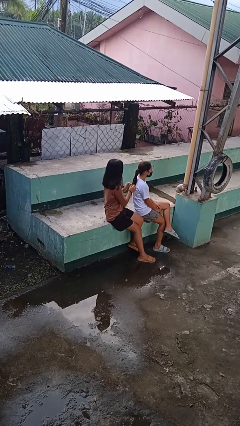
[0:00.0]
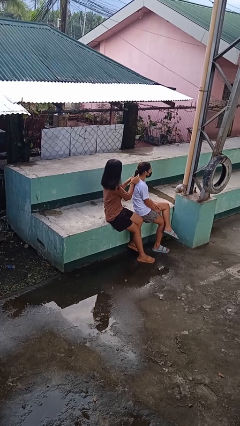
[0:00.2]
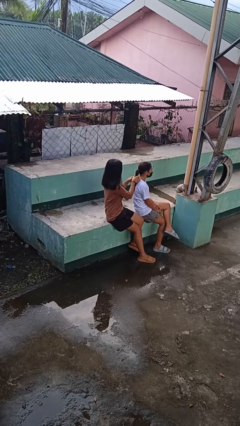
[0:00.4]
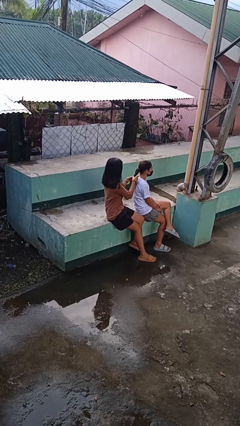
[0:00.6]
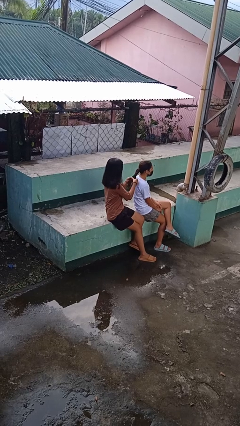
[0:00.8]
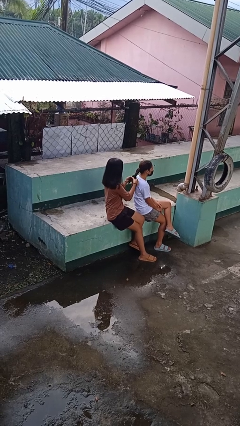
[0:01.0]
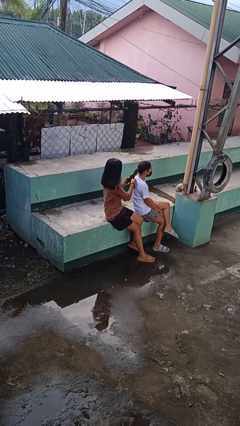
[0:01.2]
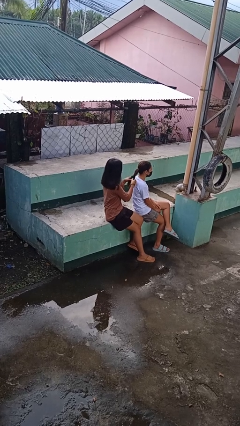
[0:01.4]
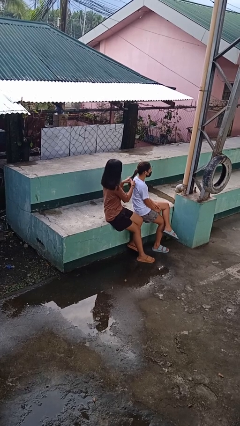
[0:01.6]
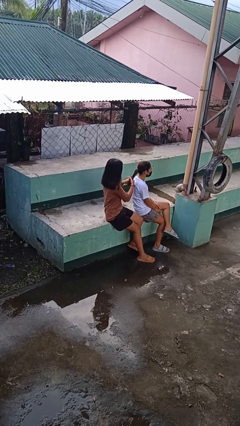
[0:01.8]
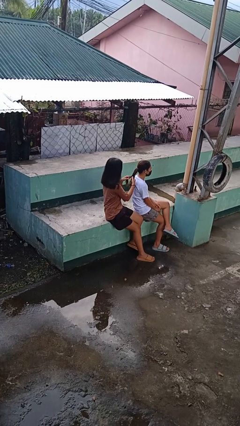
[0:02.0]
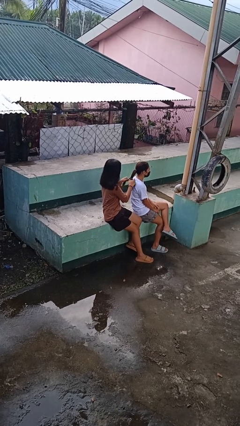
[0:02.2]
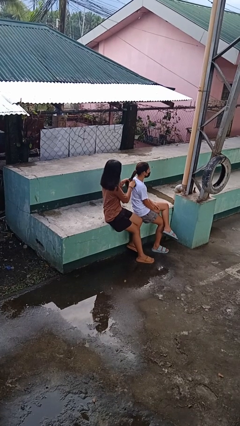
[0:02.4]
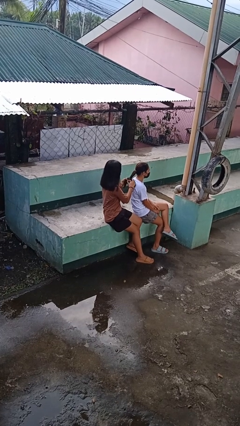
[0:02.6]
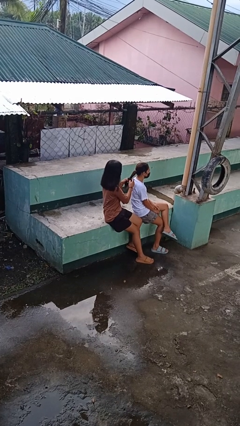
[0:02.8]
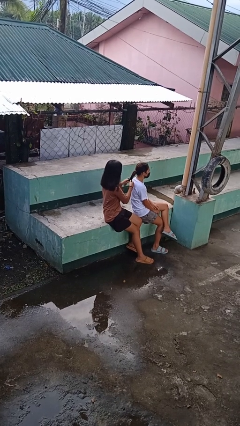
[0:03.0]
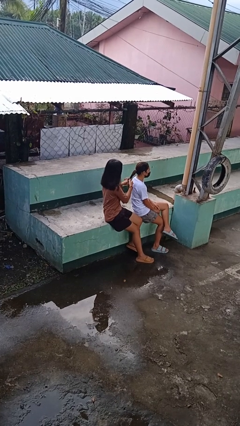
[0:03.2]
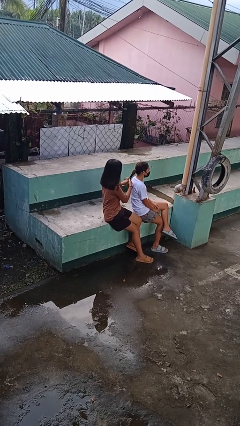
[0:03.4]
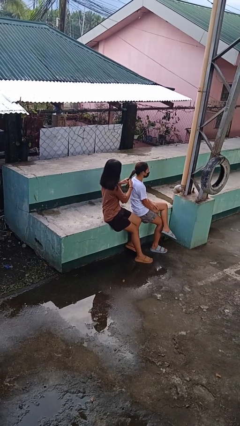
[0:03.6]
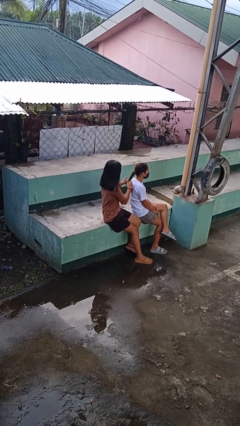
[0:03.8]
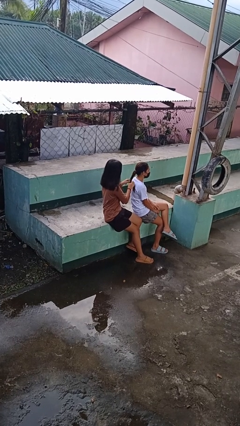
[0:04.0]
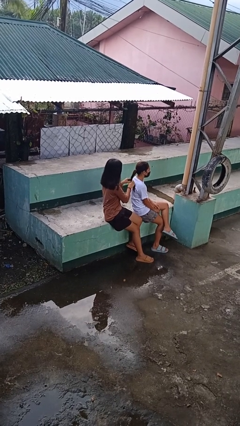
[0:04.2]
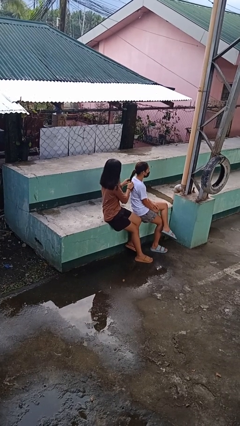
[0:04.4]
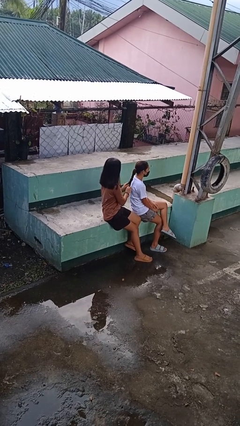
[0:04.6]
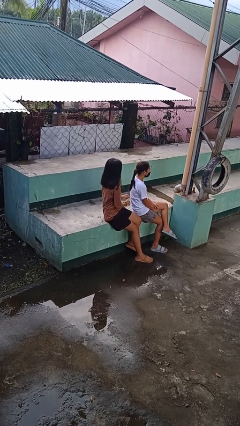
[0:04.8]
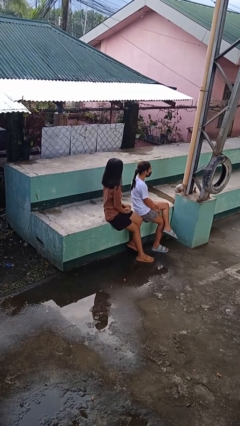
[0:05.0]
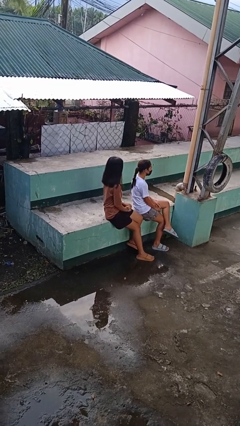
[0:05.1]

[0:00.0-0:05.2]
person braids hair of person

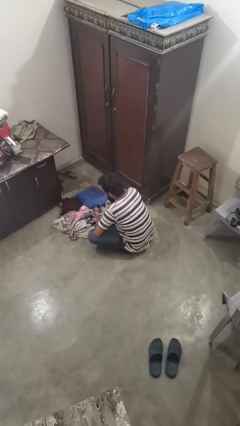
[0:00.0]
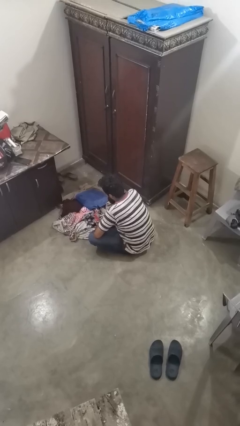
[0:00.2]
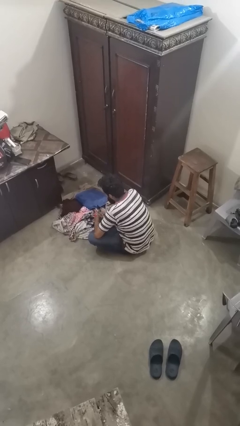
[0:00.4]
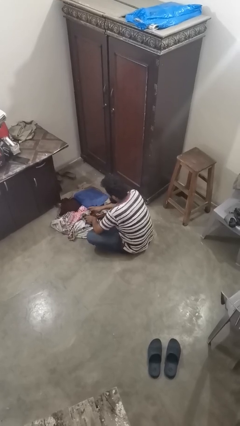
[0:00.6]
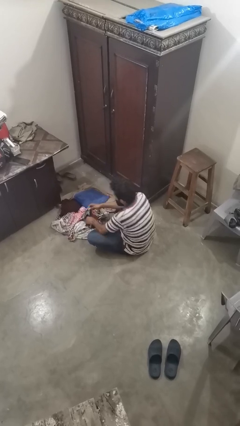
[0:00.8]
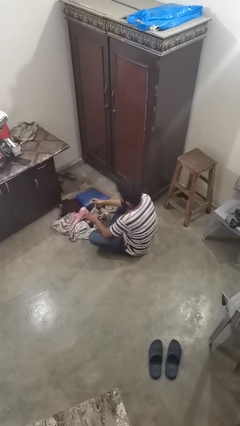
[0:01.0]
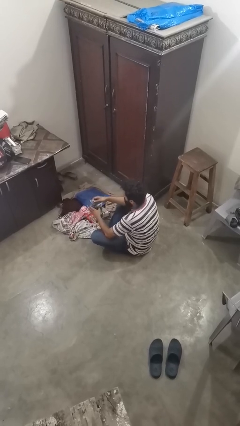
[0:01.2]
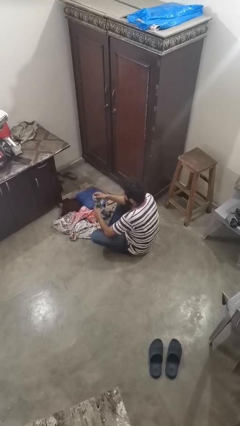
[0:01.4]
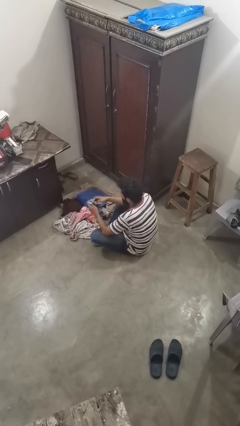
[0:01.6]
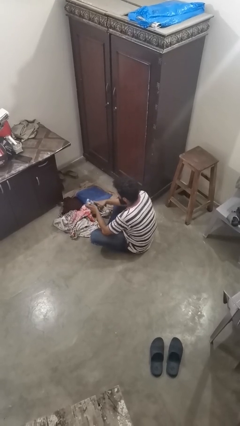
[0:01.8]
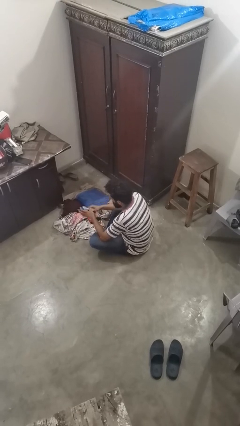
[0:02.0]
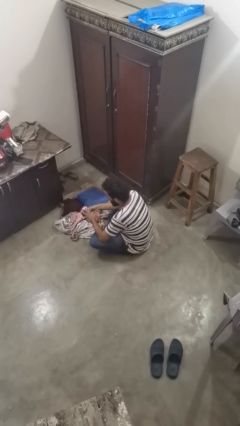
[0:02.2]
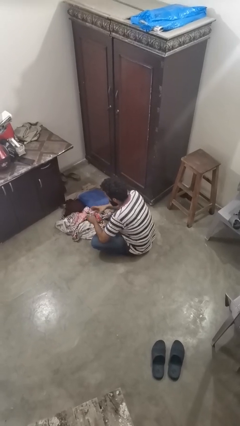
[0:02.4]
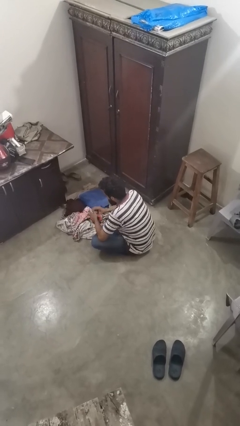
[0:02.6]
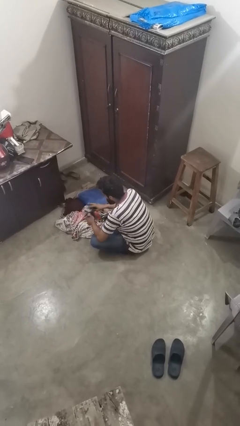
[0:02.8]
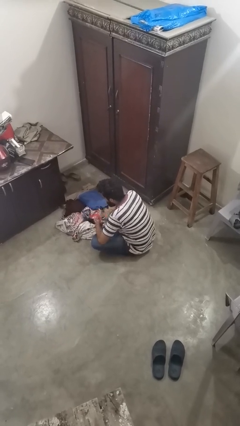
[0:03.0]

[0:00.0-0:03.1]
person folds socks

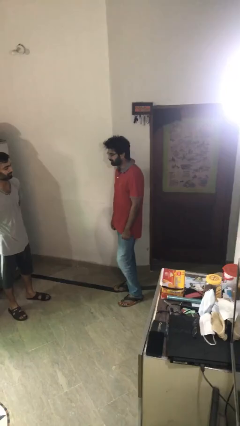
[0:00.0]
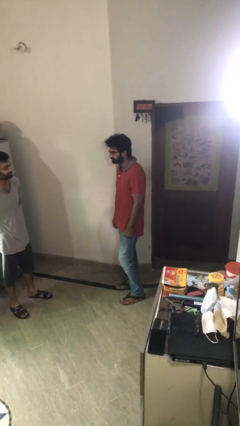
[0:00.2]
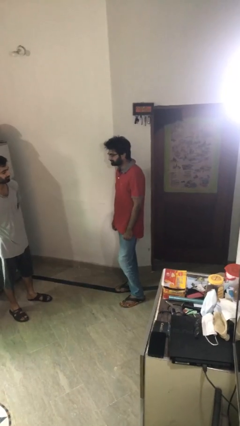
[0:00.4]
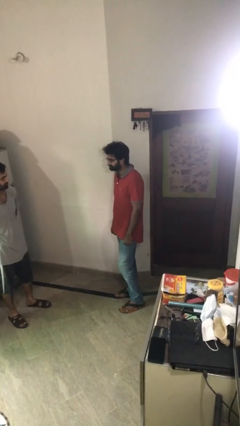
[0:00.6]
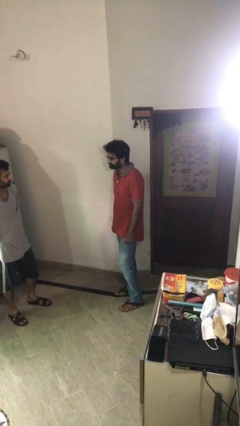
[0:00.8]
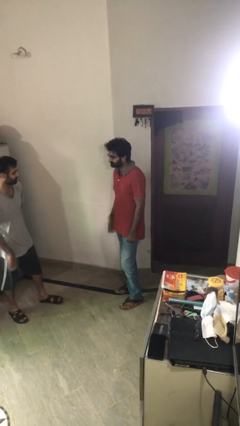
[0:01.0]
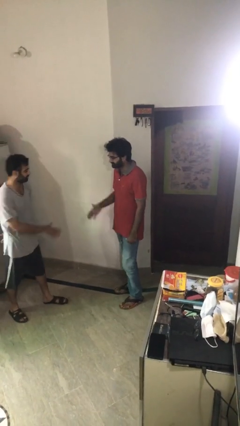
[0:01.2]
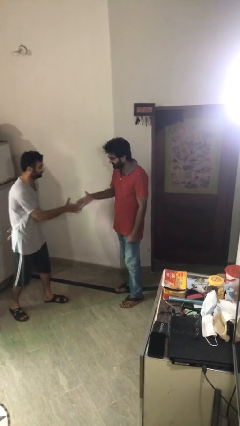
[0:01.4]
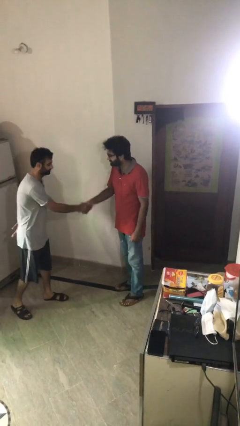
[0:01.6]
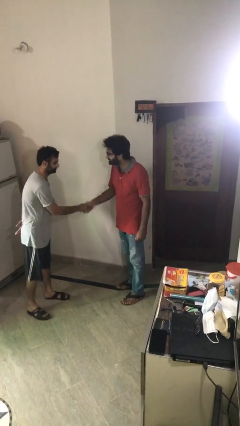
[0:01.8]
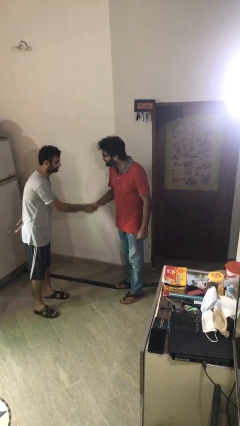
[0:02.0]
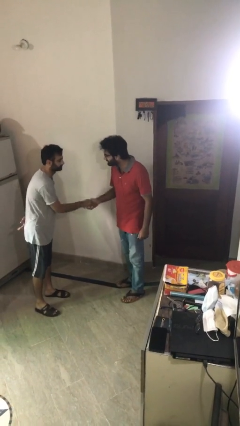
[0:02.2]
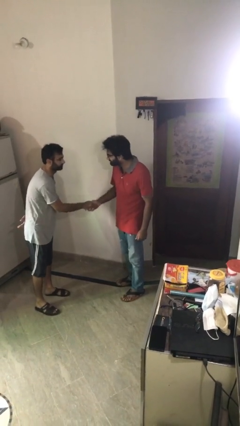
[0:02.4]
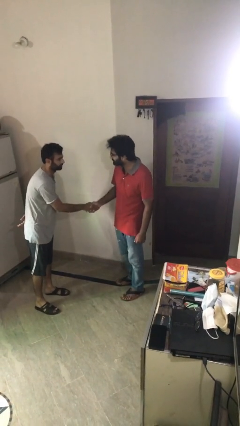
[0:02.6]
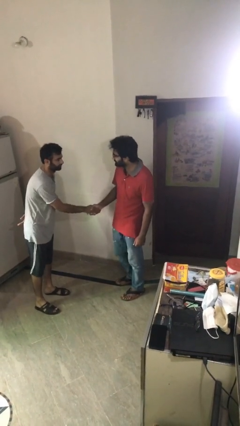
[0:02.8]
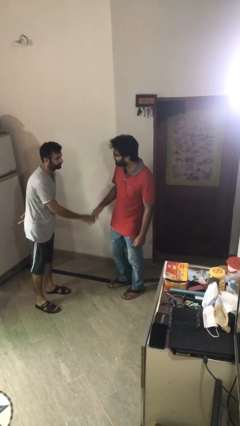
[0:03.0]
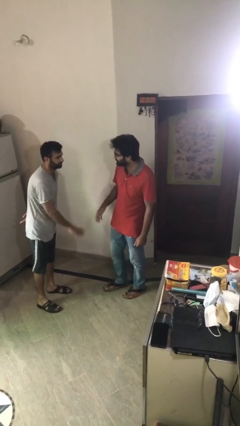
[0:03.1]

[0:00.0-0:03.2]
person shakes hand

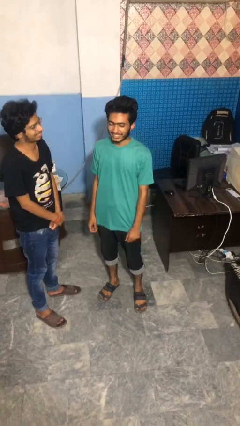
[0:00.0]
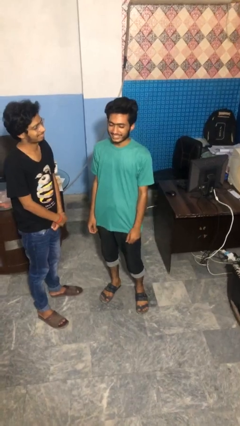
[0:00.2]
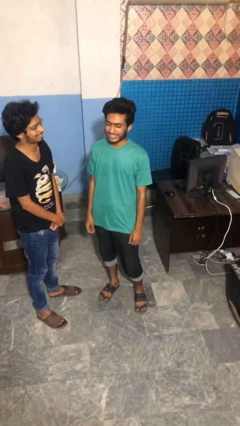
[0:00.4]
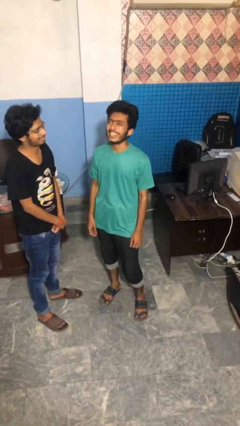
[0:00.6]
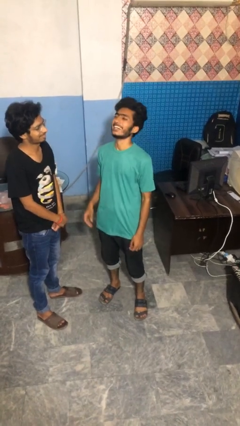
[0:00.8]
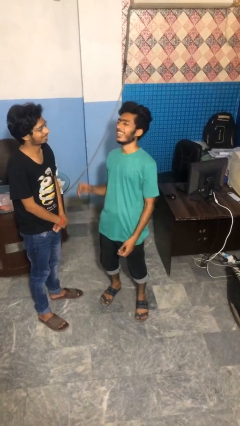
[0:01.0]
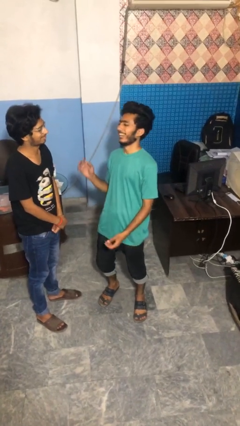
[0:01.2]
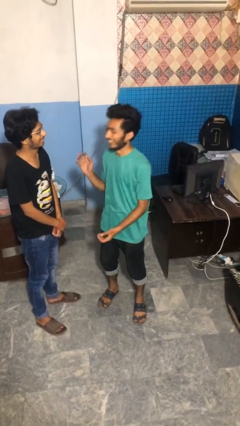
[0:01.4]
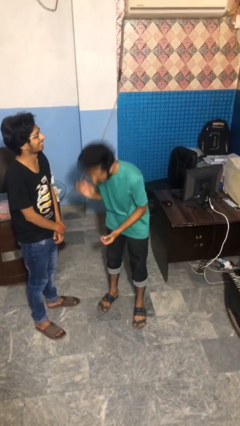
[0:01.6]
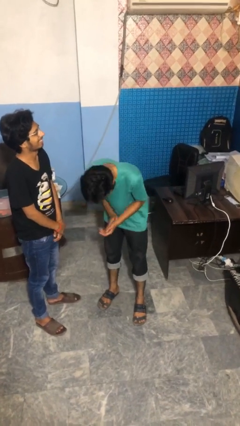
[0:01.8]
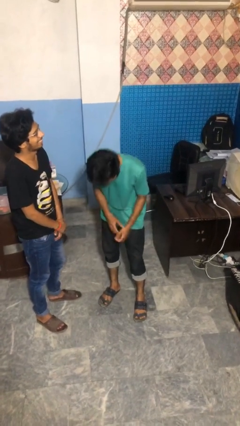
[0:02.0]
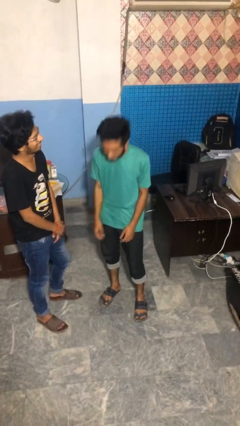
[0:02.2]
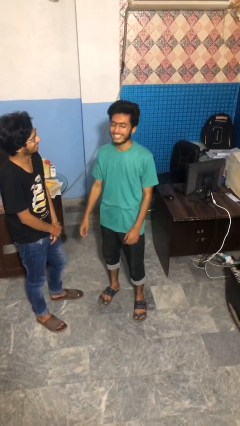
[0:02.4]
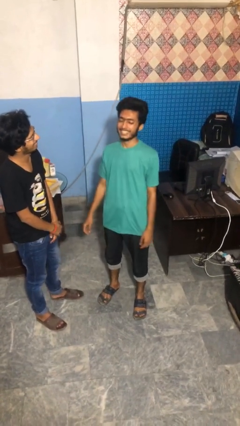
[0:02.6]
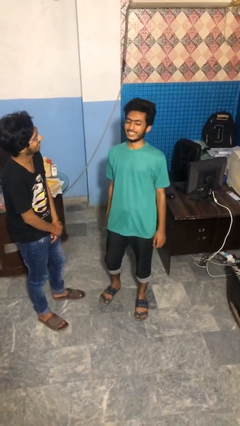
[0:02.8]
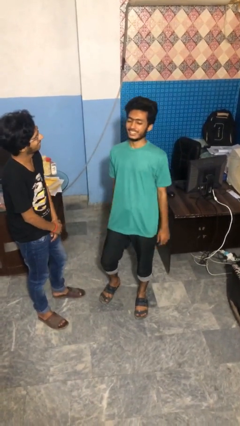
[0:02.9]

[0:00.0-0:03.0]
person laughs with person

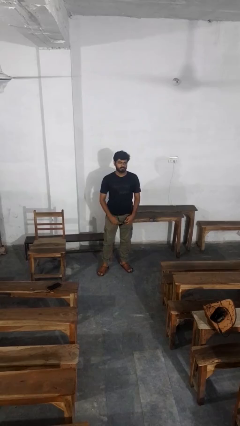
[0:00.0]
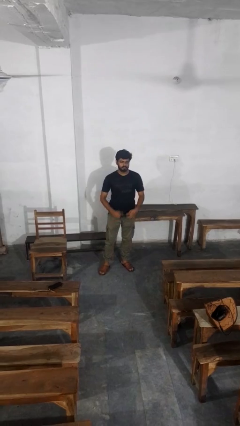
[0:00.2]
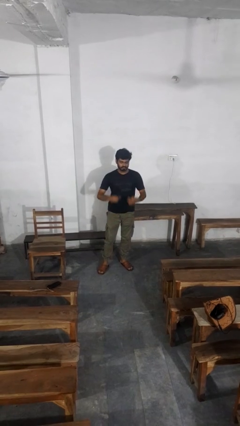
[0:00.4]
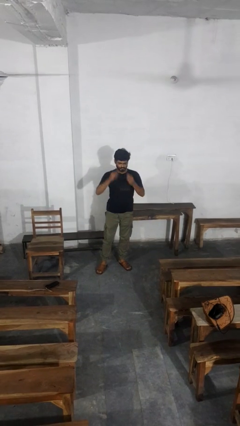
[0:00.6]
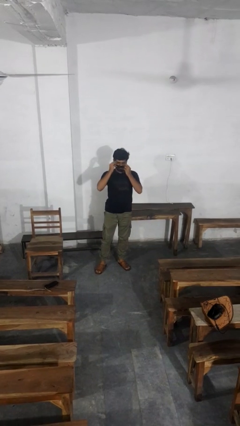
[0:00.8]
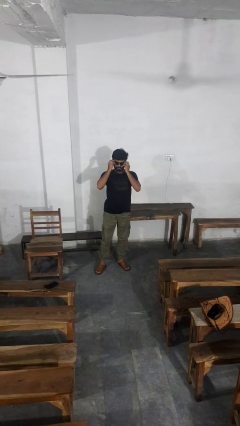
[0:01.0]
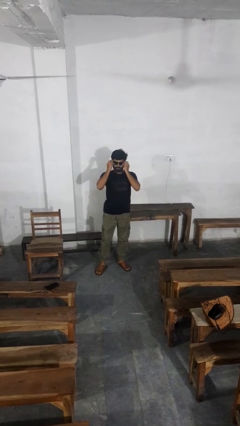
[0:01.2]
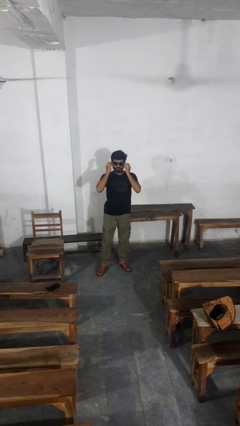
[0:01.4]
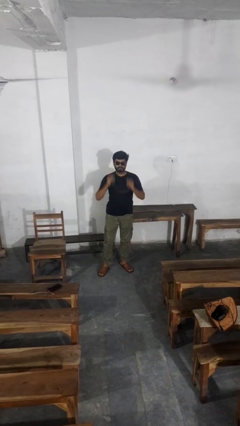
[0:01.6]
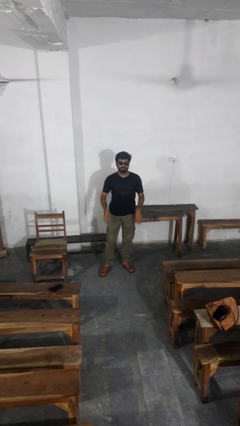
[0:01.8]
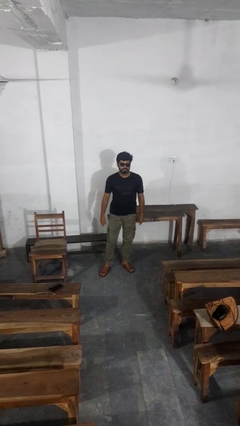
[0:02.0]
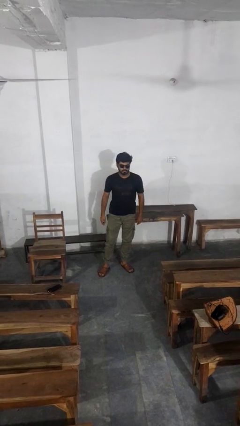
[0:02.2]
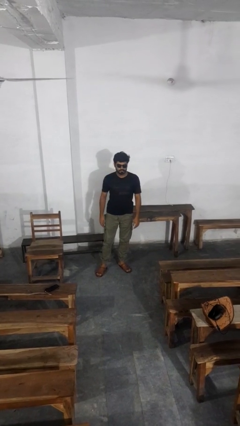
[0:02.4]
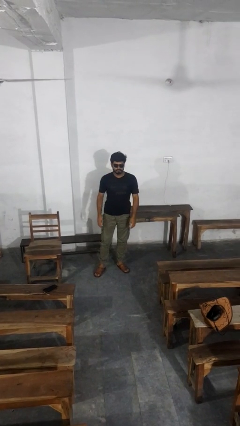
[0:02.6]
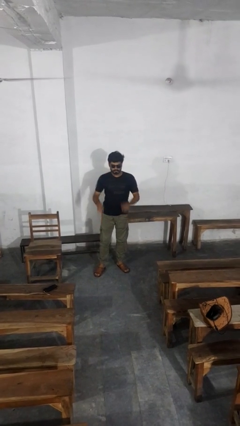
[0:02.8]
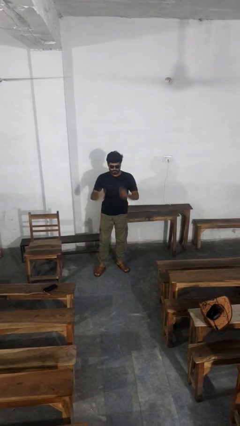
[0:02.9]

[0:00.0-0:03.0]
person puts on sunglasses

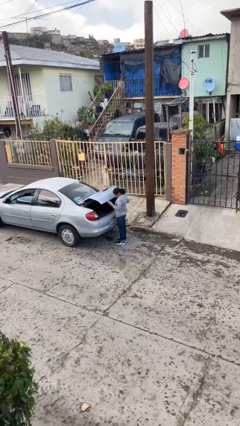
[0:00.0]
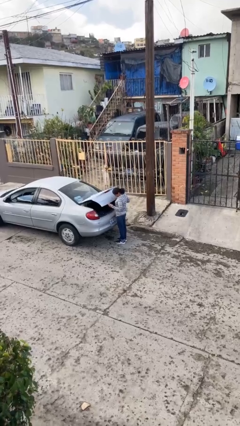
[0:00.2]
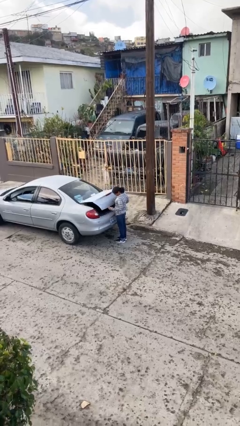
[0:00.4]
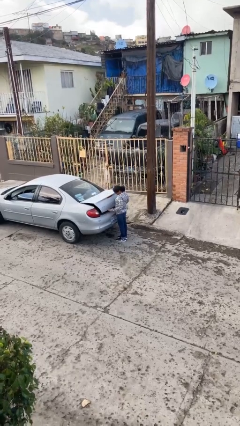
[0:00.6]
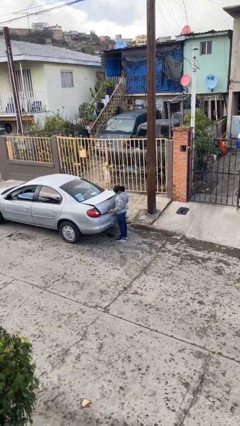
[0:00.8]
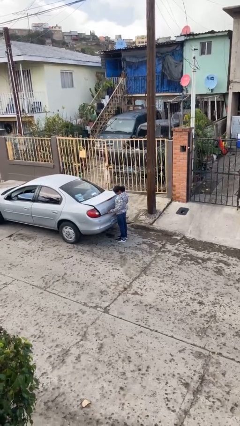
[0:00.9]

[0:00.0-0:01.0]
person closes car trunk
